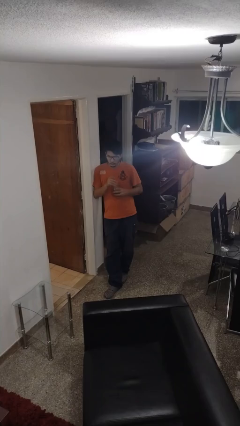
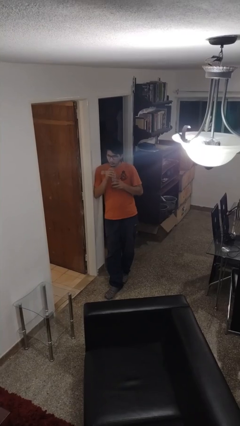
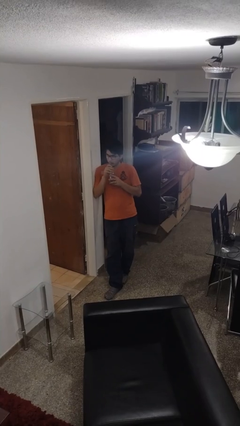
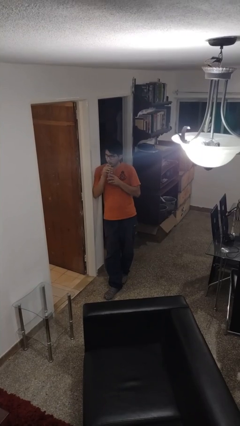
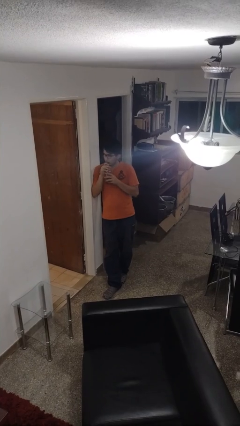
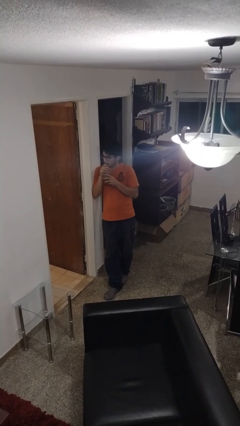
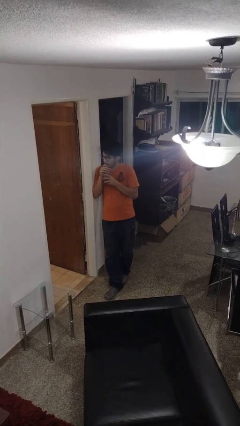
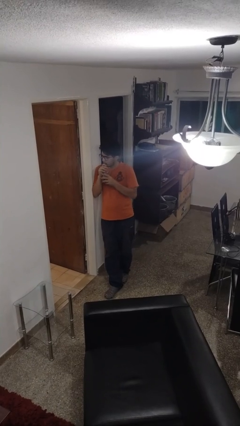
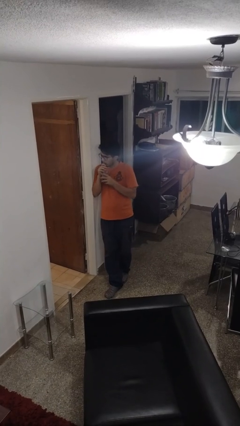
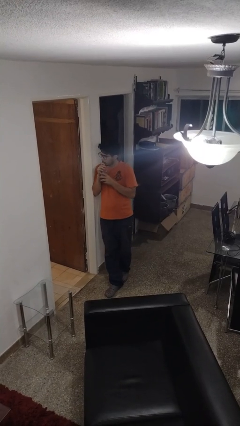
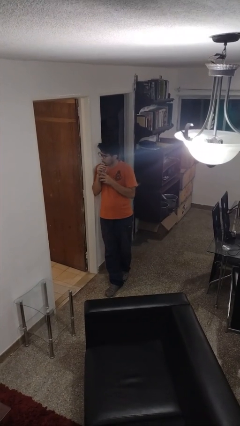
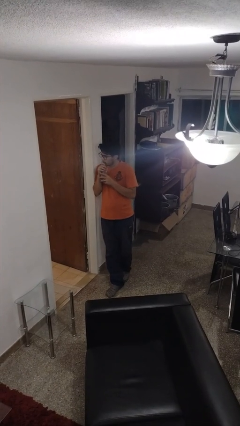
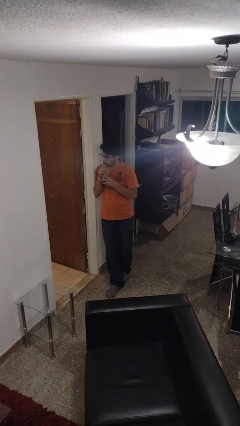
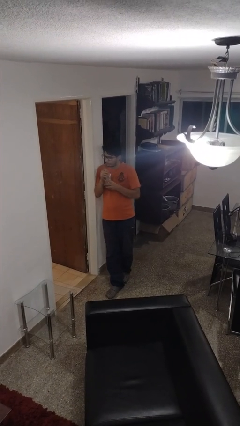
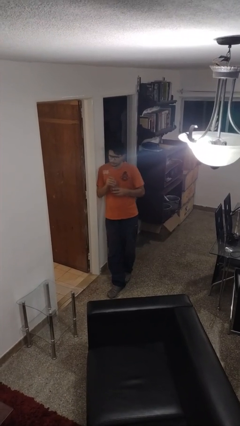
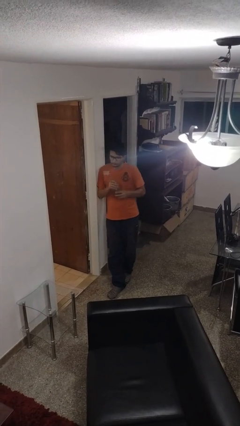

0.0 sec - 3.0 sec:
person drinks from straw

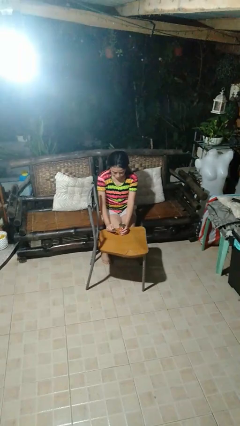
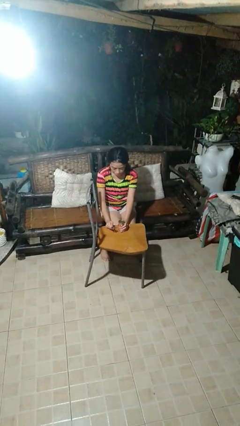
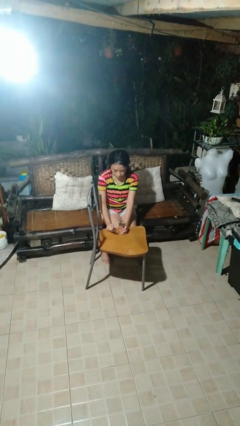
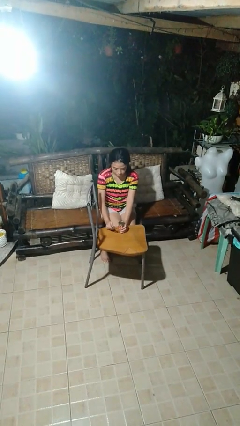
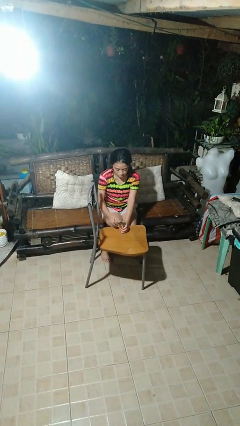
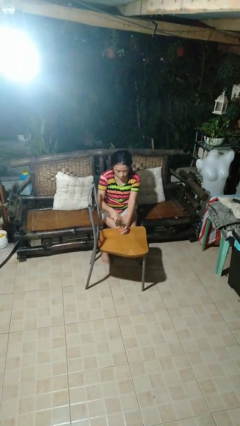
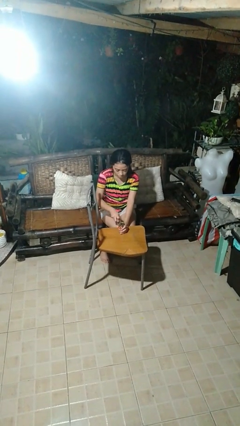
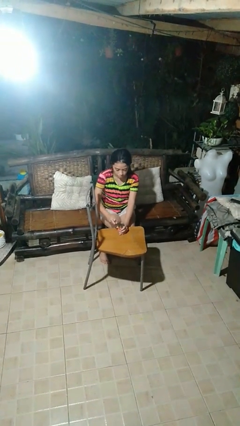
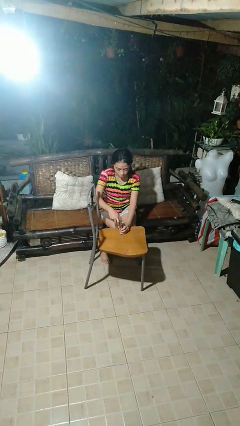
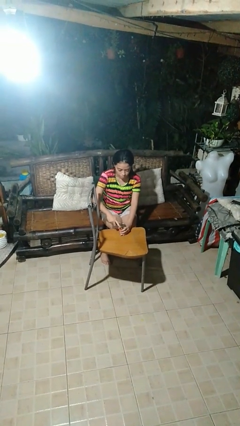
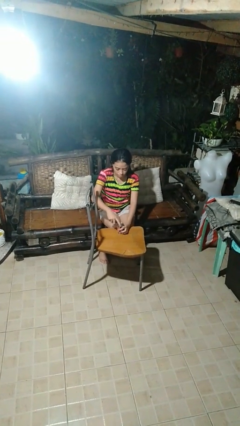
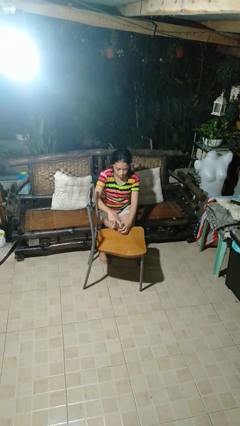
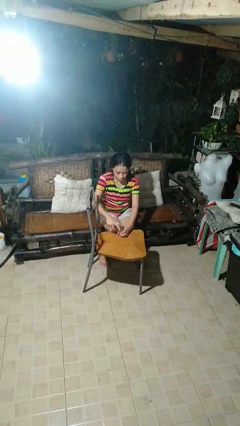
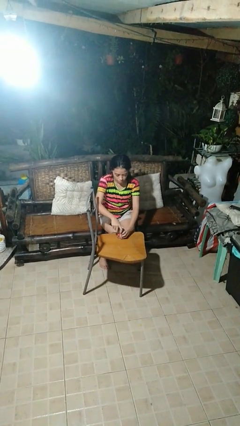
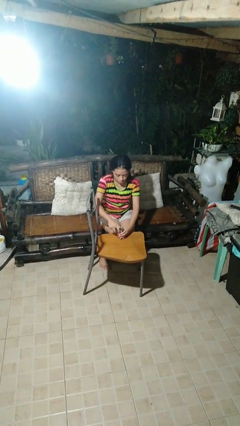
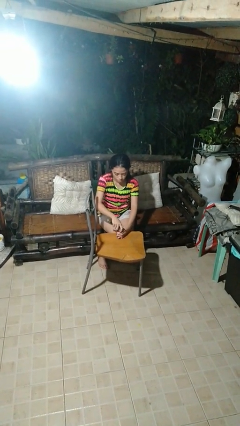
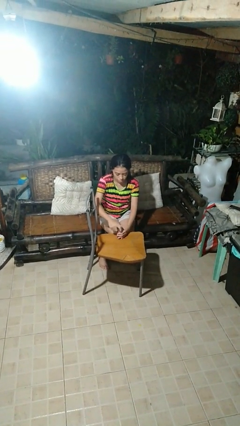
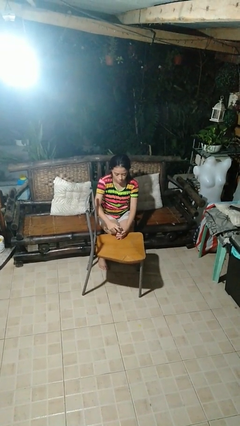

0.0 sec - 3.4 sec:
person opens can with can opener

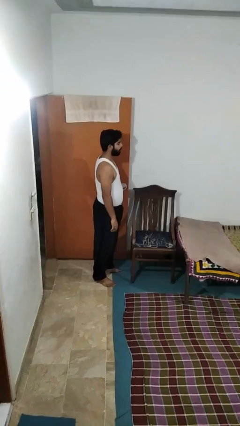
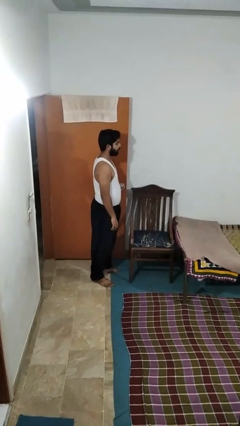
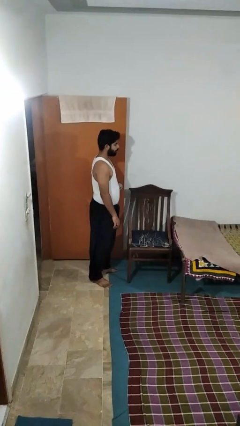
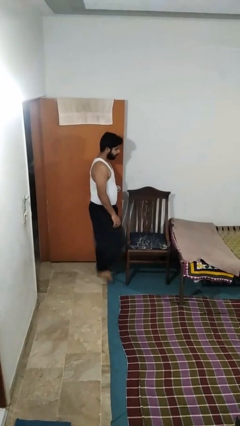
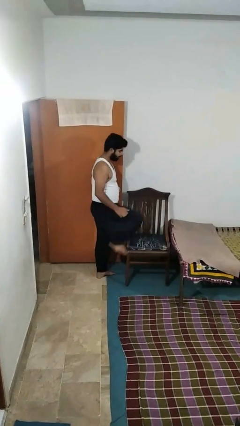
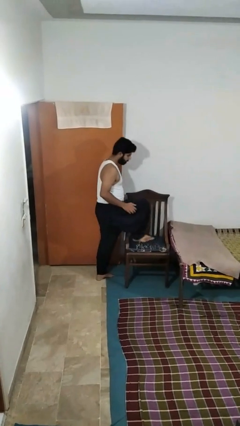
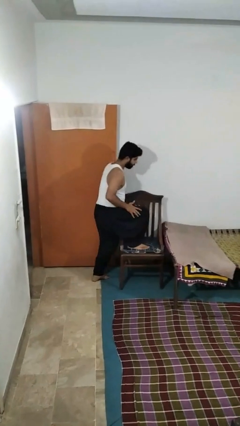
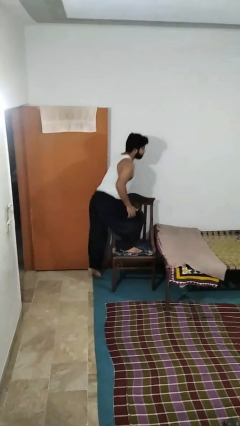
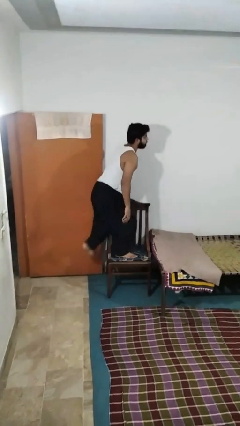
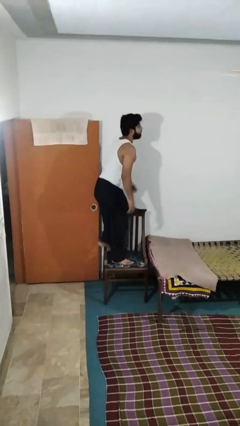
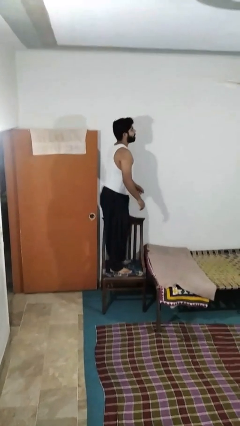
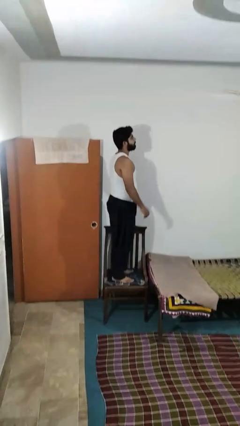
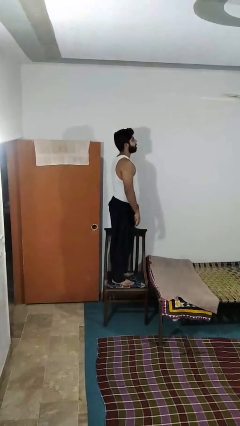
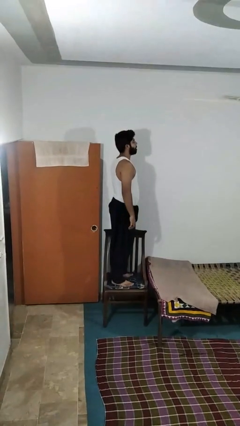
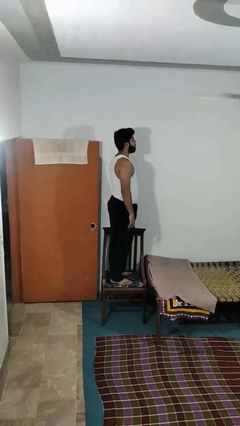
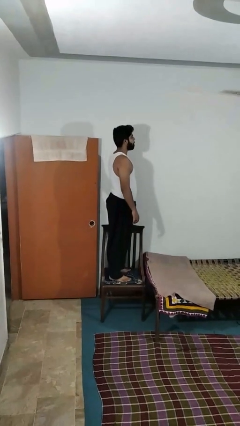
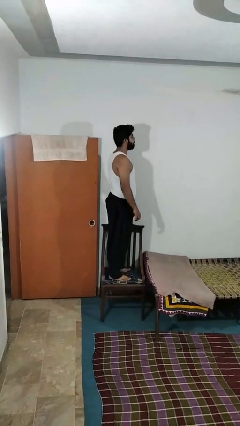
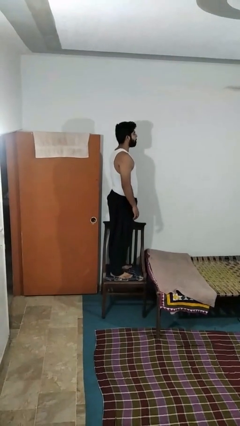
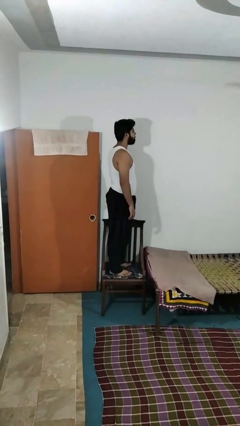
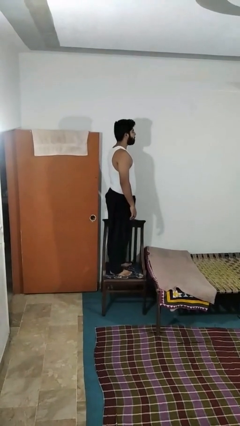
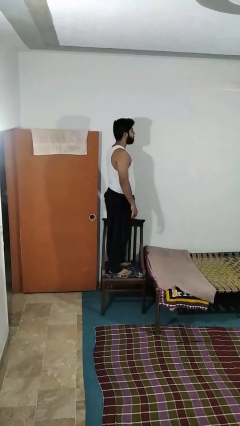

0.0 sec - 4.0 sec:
person climbs on chair

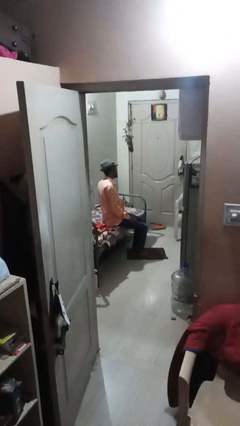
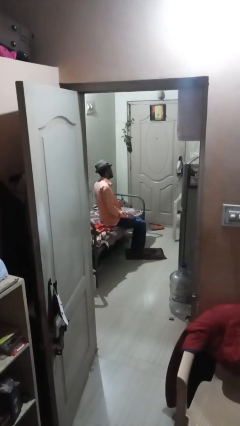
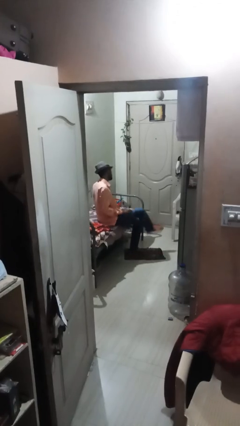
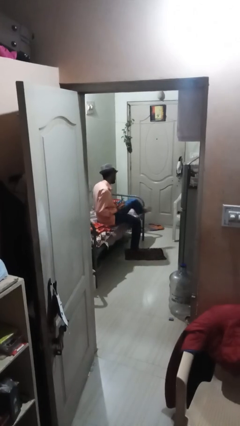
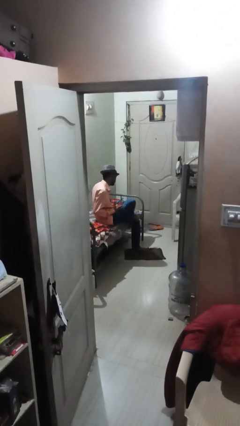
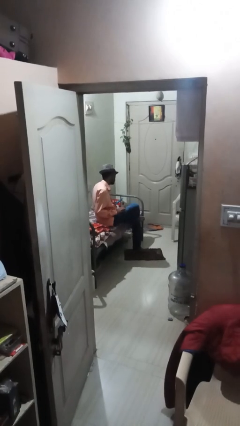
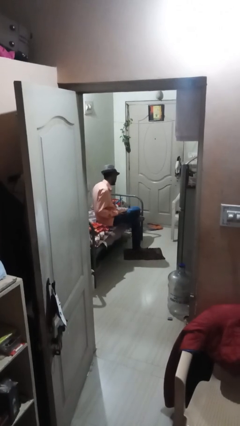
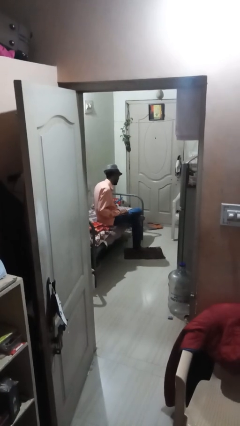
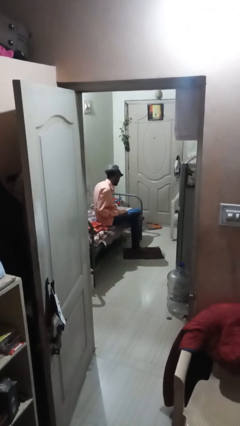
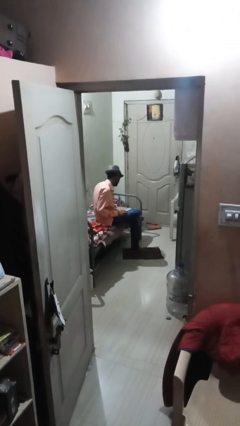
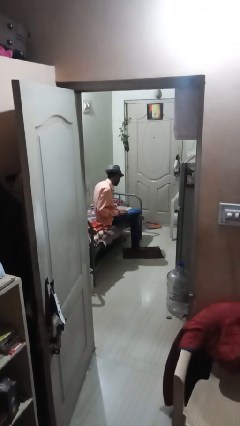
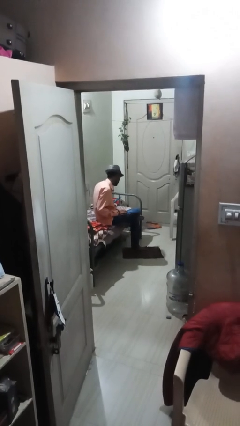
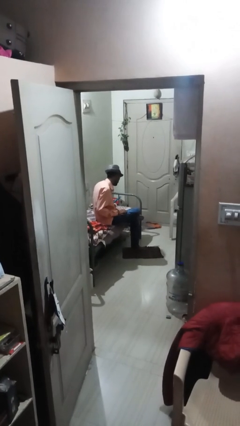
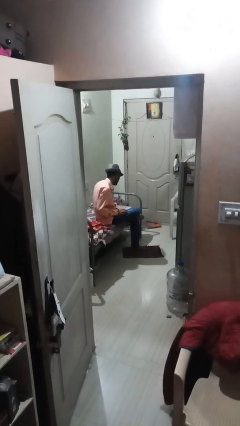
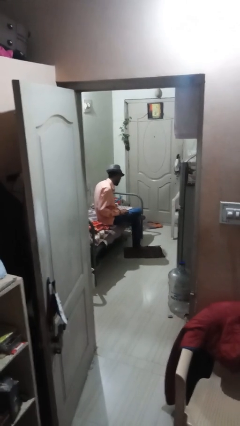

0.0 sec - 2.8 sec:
person crosses legs

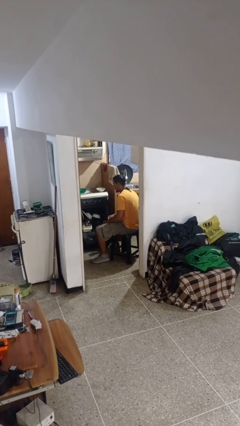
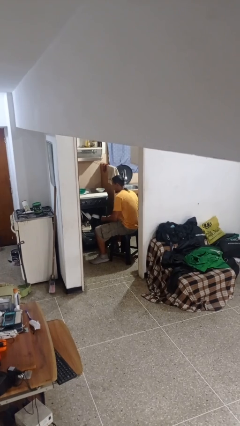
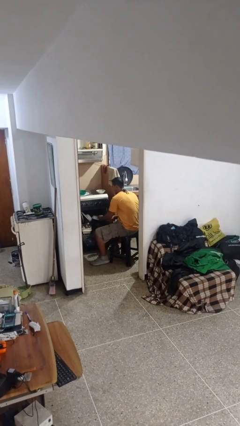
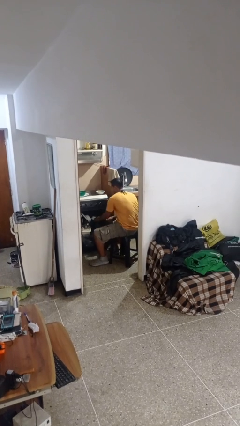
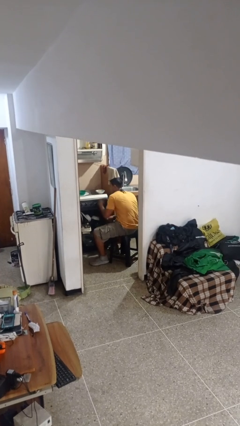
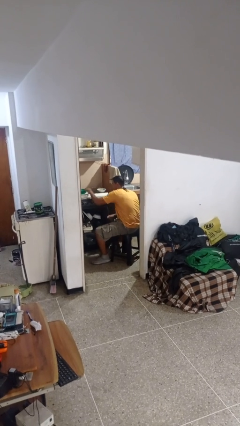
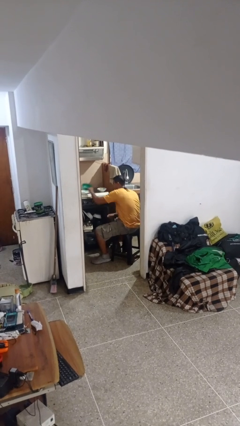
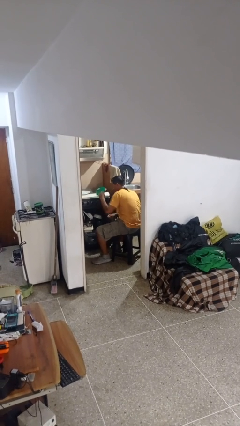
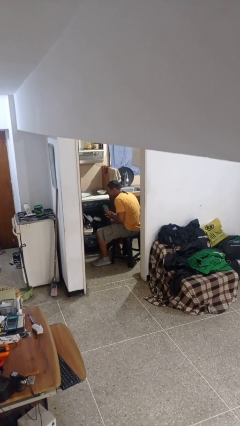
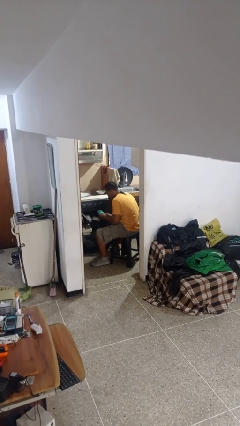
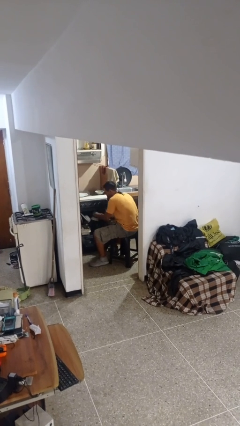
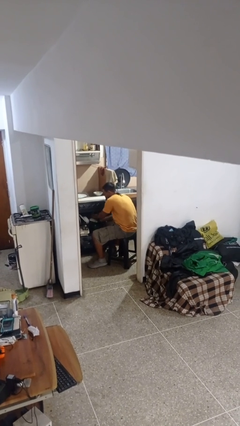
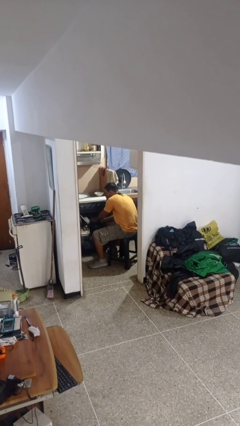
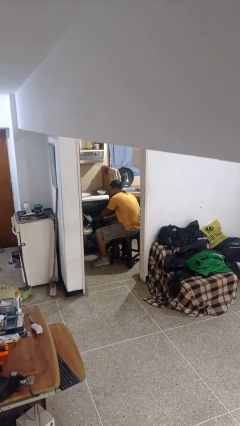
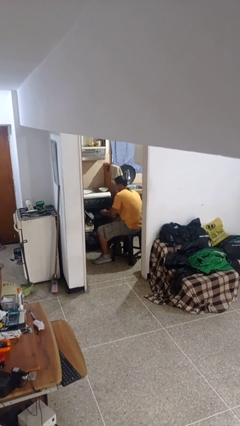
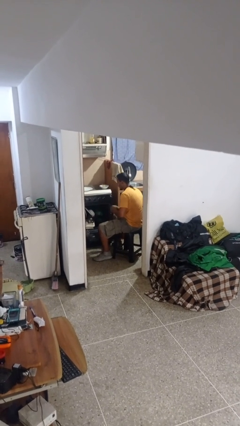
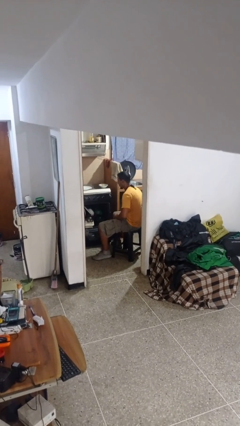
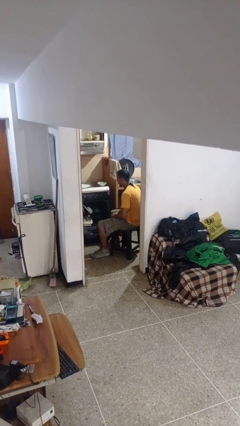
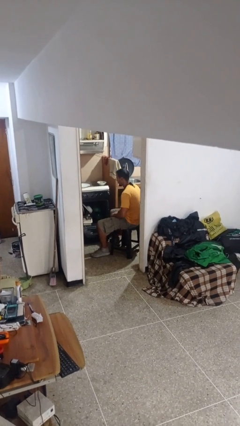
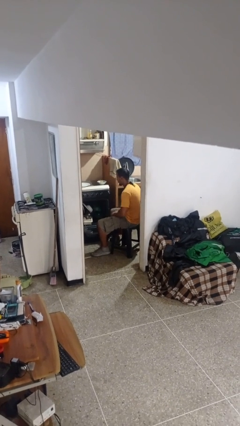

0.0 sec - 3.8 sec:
person loads dishwasher

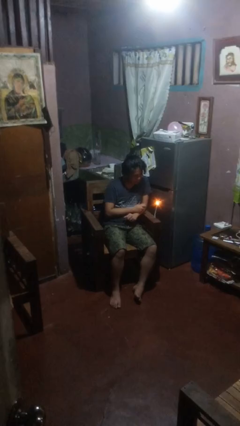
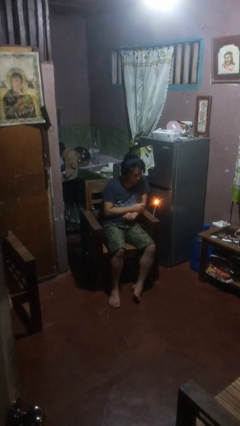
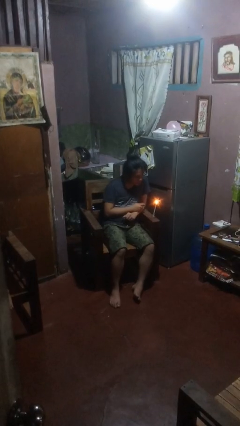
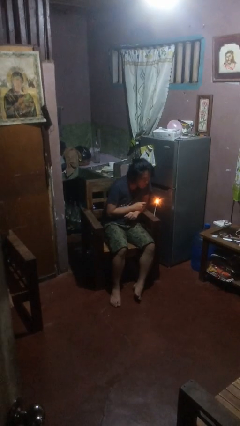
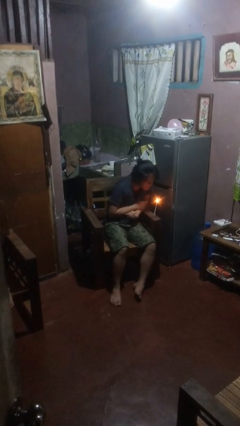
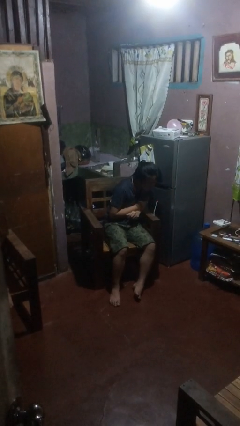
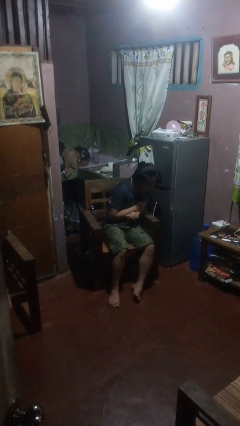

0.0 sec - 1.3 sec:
person extinguishes candle
